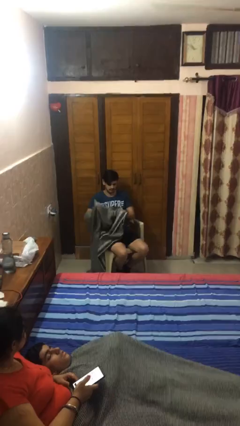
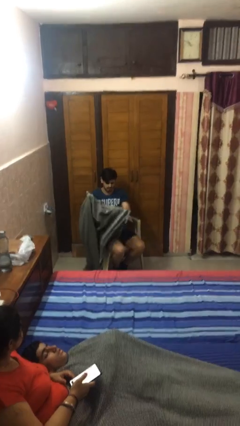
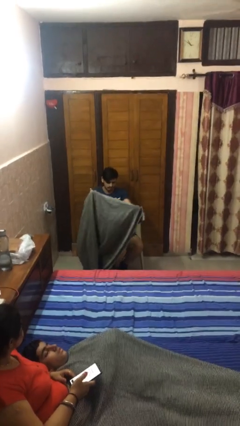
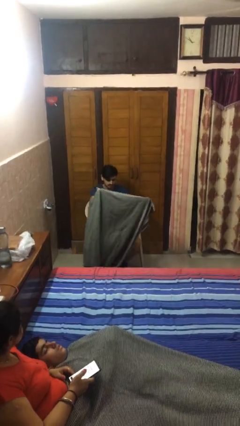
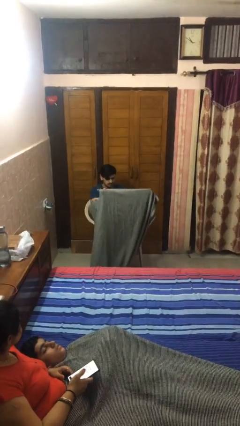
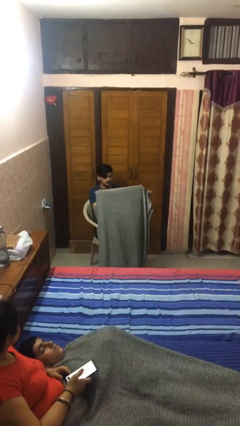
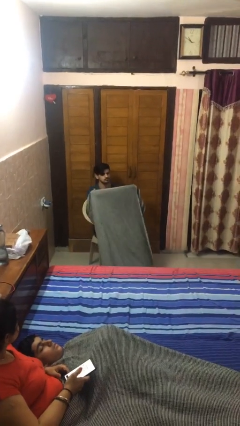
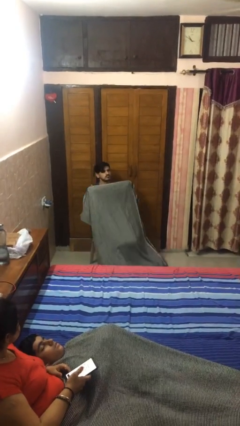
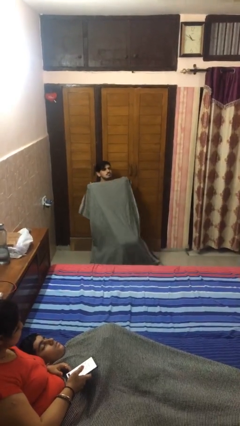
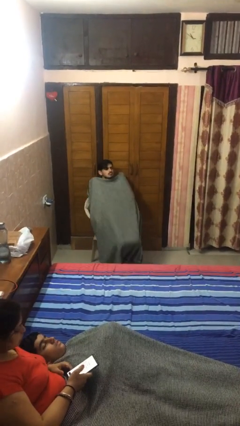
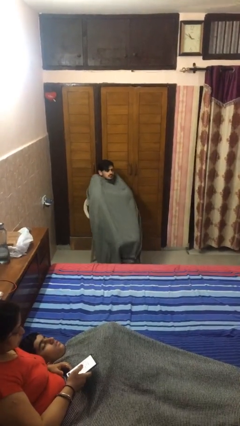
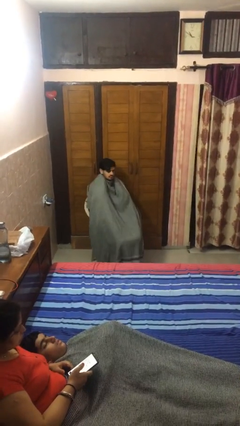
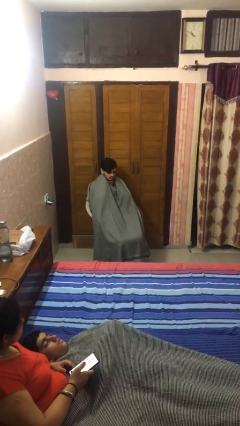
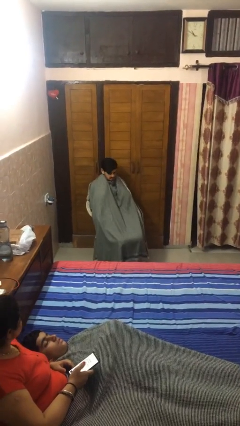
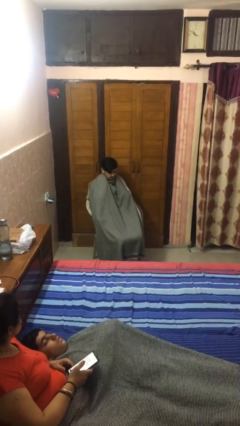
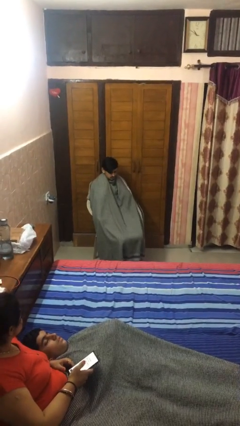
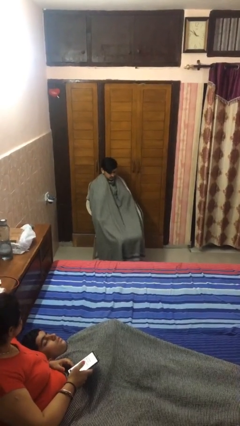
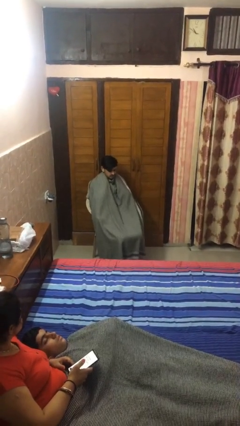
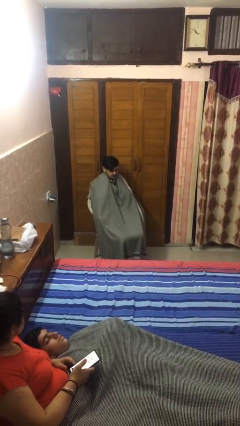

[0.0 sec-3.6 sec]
person covers with blanket

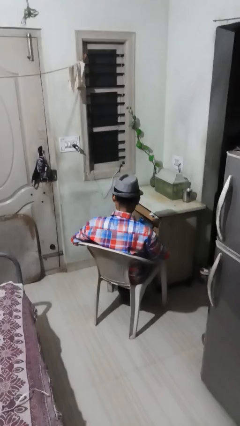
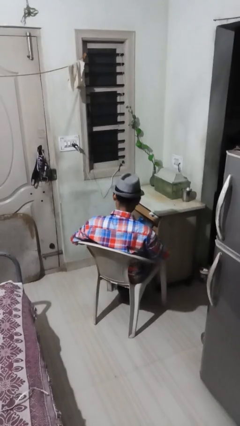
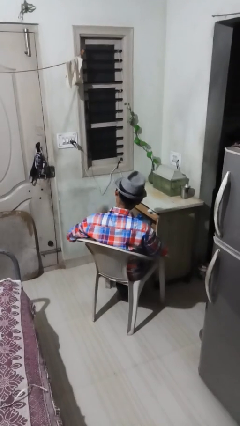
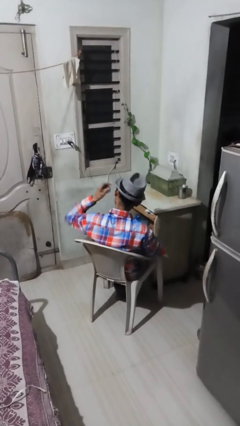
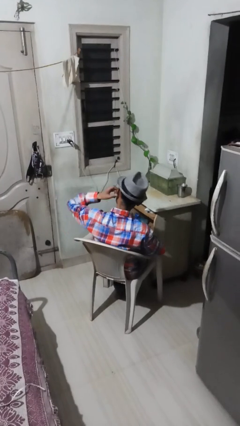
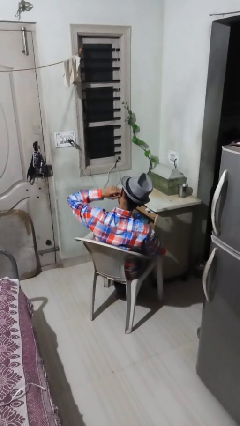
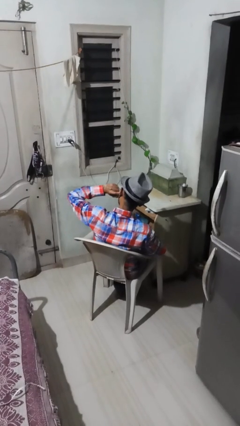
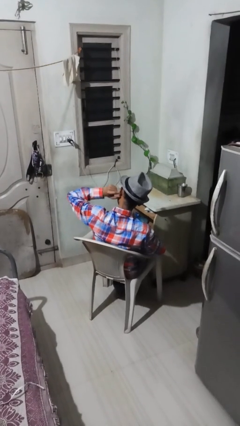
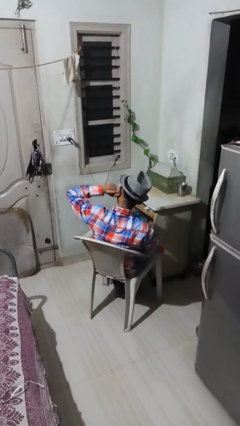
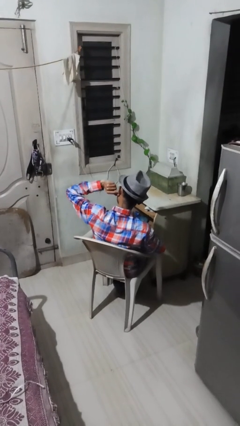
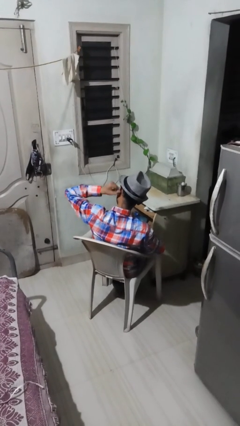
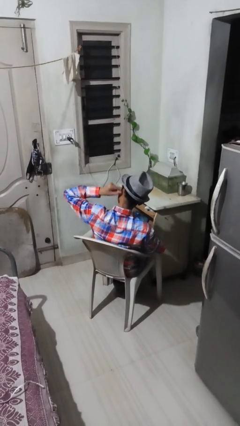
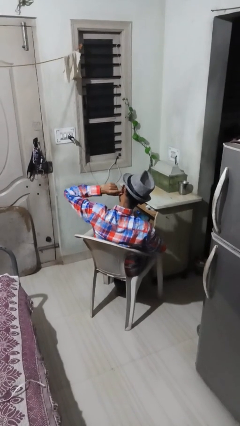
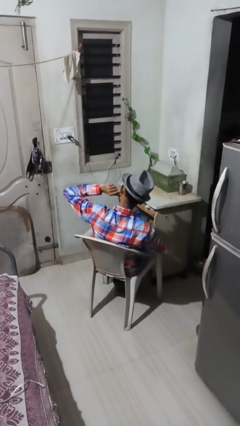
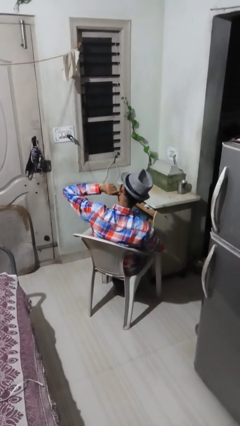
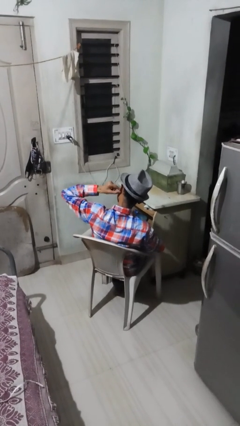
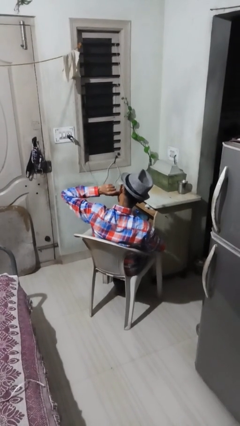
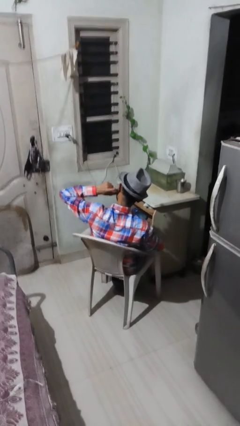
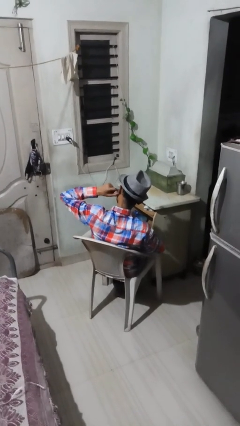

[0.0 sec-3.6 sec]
person puts fingers in ear

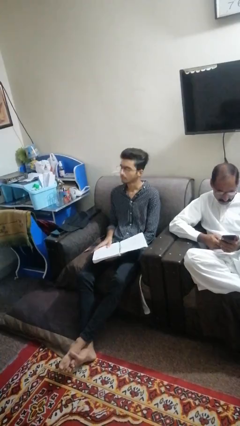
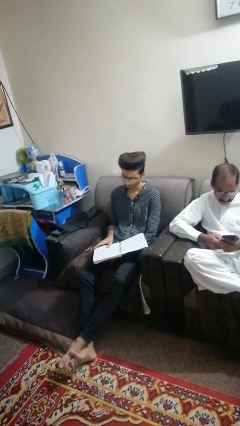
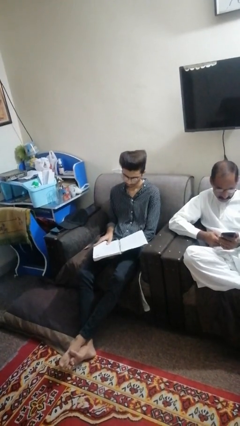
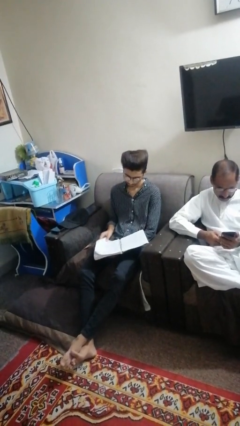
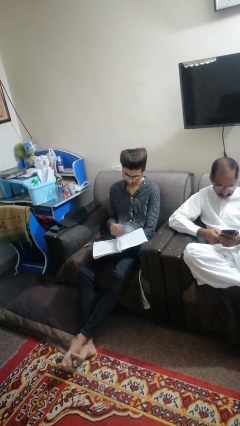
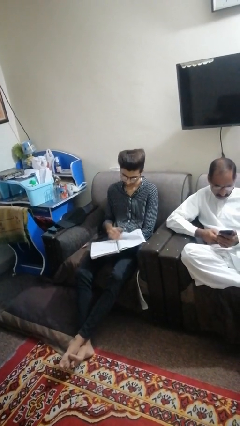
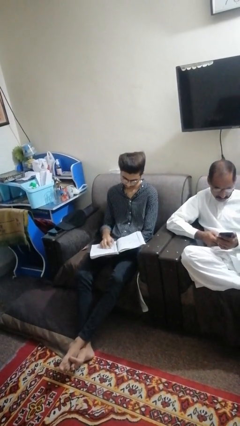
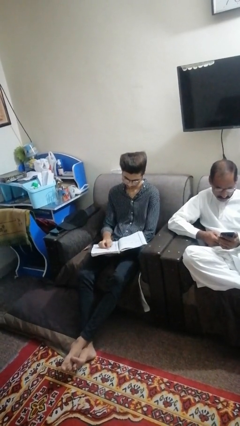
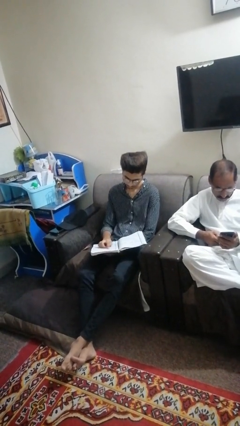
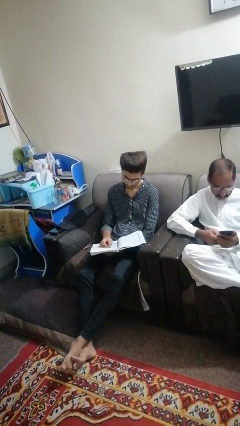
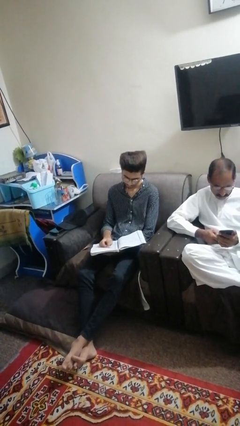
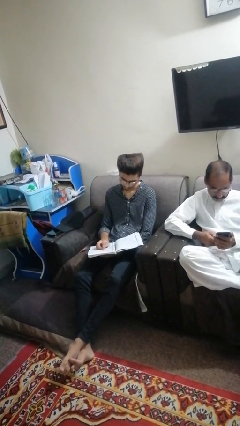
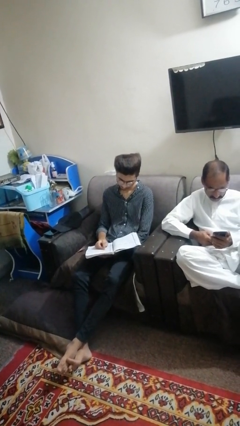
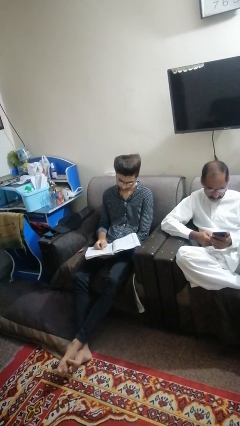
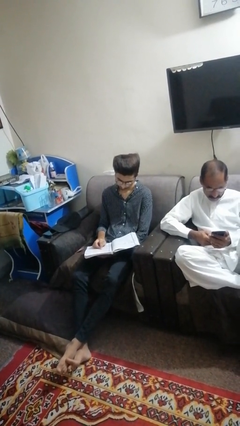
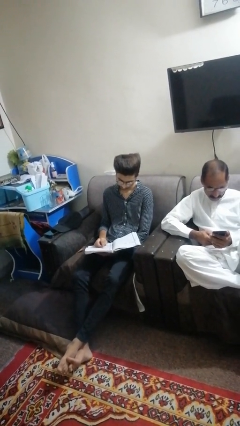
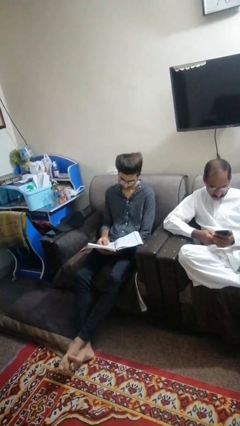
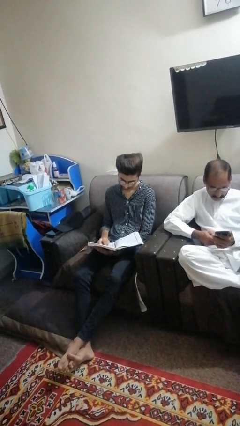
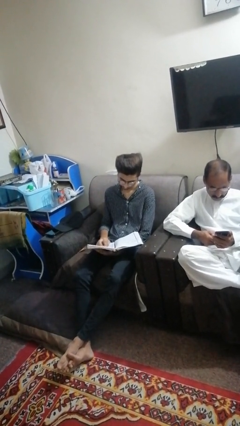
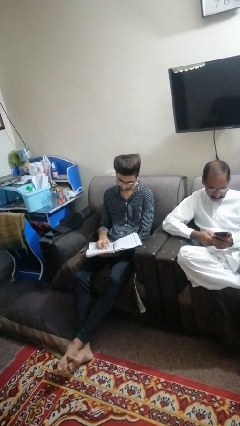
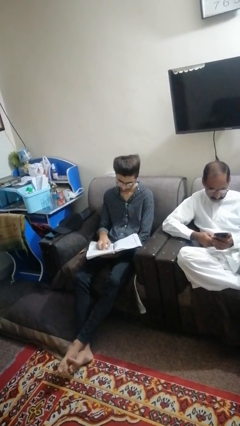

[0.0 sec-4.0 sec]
person reads magazine

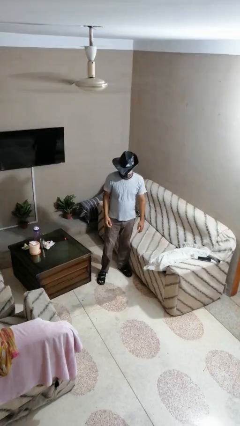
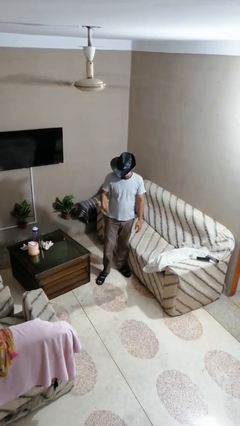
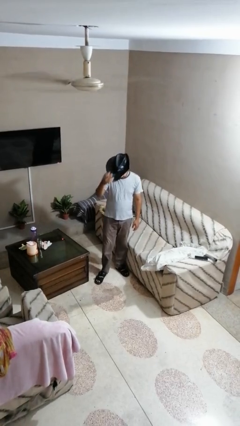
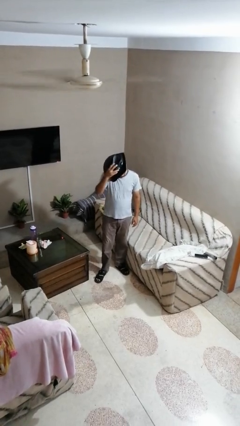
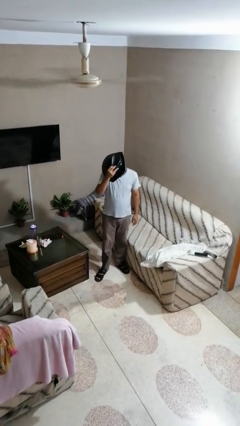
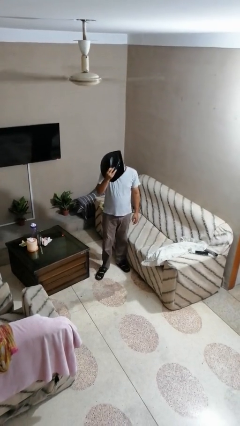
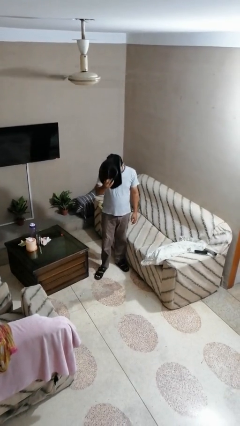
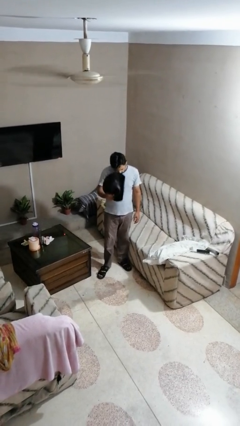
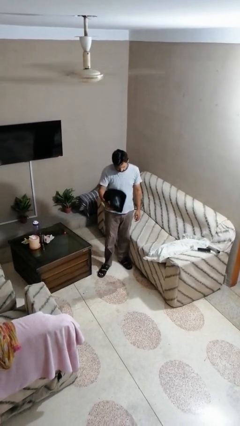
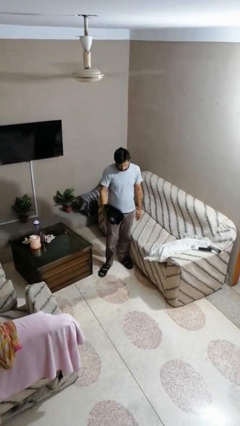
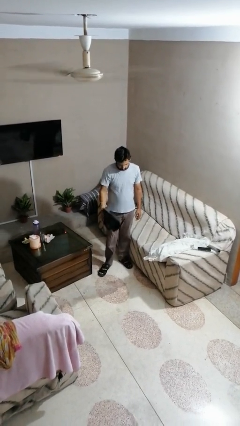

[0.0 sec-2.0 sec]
person takes off hat

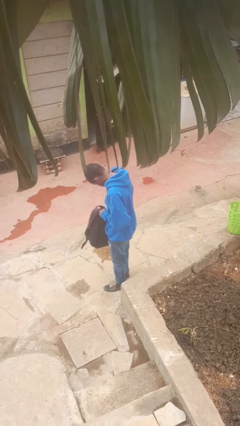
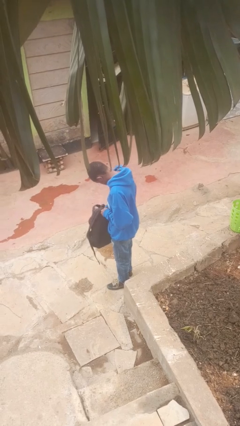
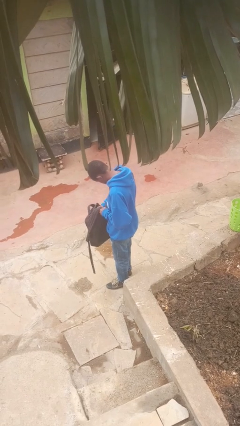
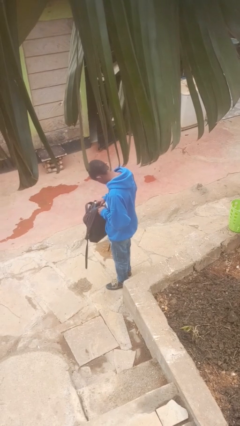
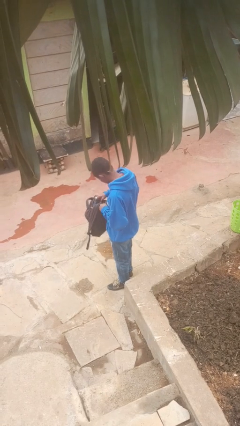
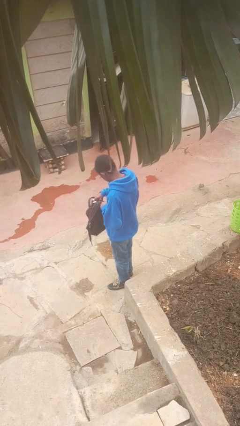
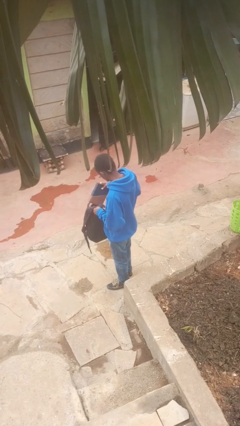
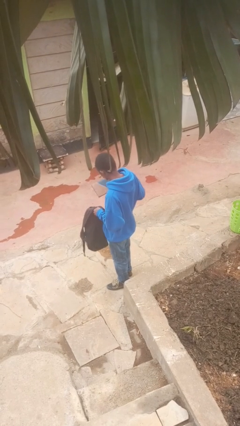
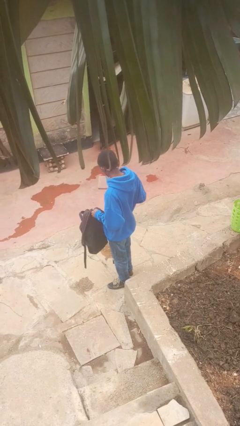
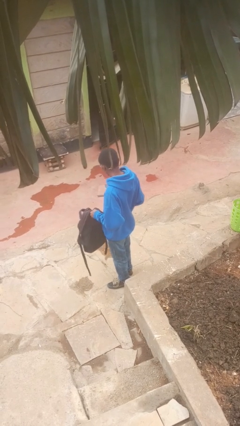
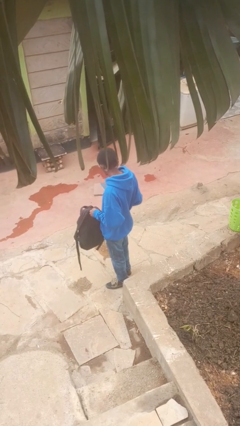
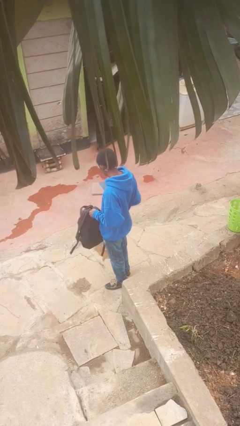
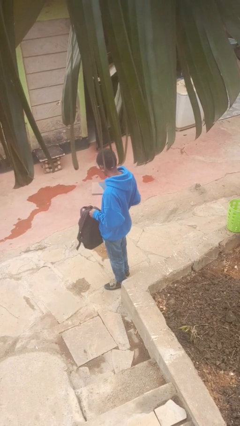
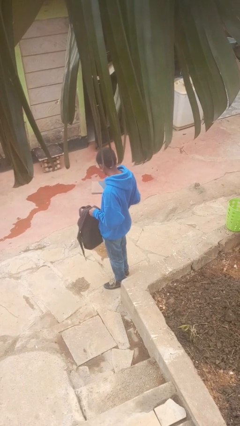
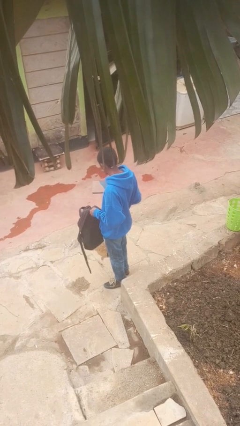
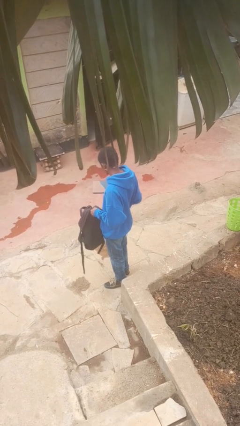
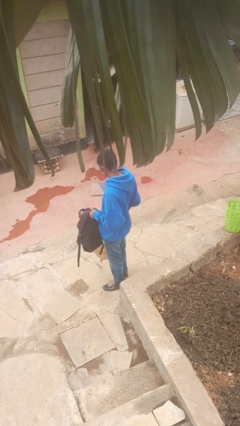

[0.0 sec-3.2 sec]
person takes object from backpack

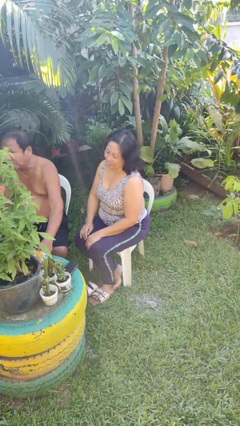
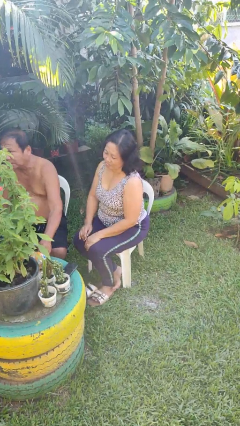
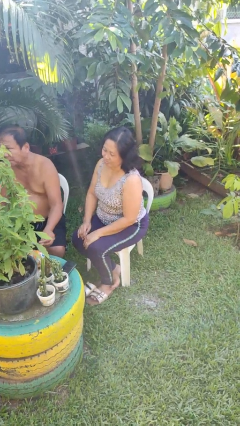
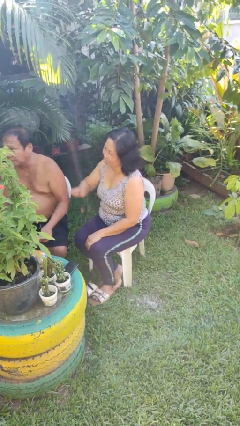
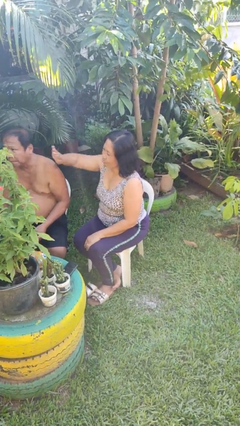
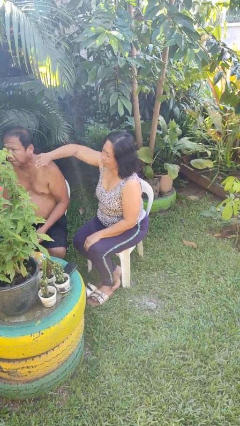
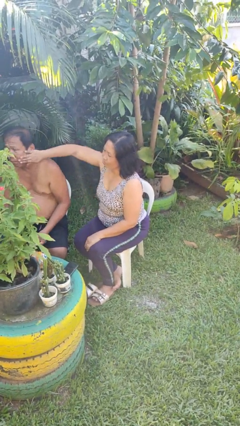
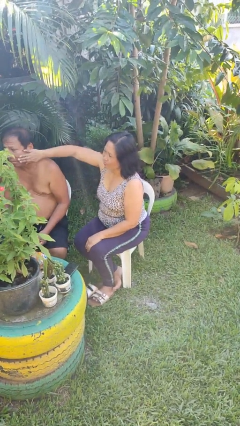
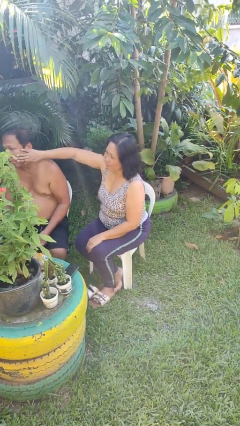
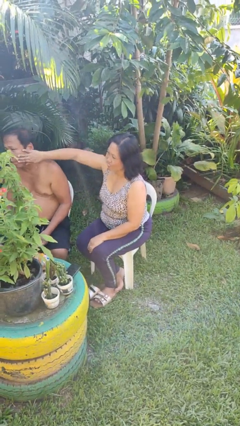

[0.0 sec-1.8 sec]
person touches face of person
